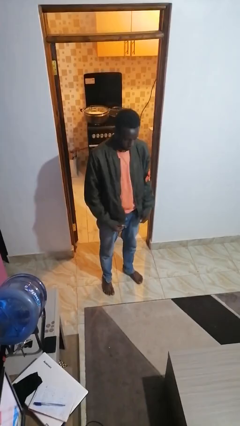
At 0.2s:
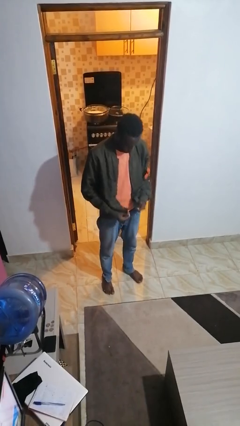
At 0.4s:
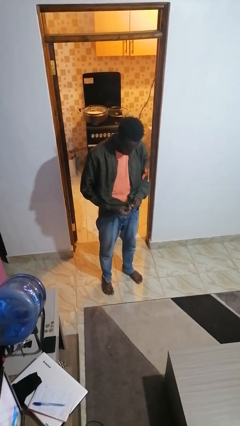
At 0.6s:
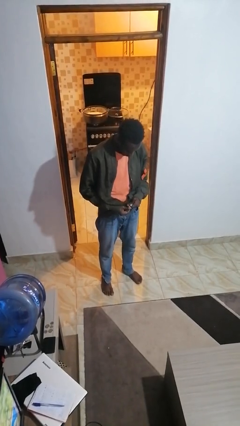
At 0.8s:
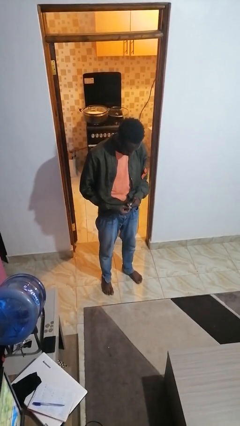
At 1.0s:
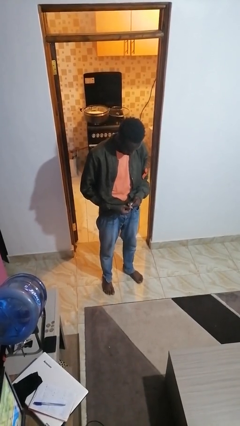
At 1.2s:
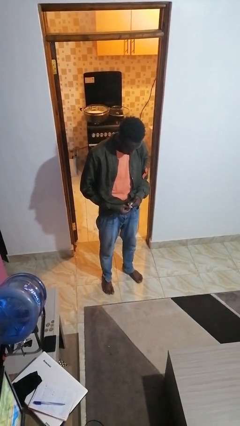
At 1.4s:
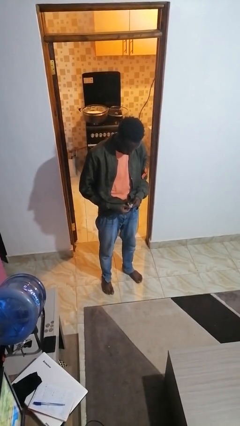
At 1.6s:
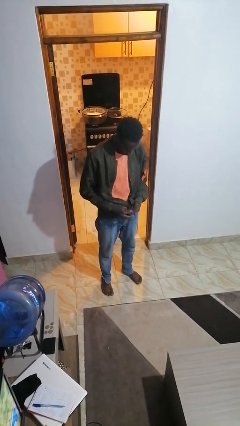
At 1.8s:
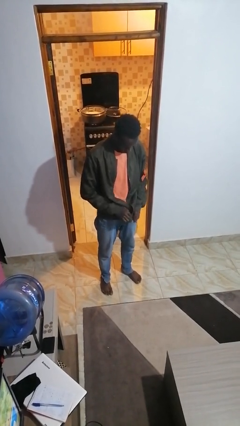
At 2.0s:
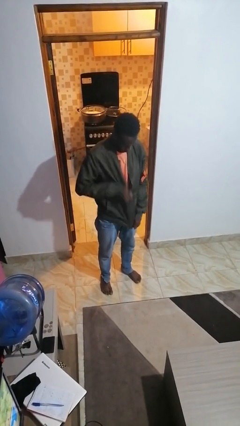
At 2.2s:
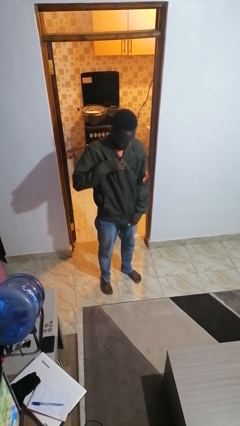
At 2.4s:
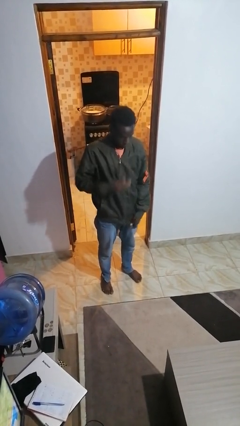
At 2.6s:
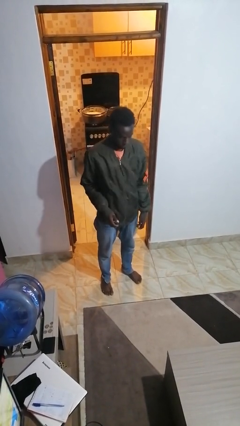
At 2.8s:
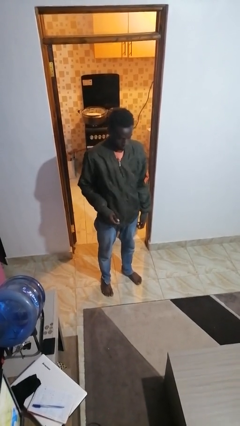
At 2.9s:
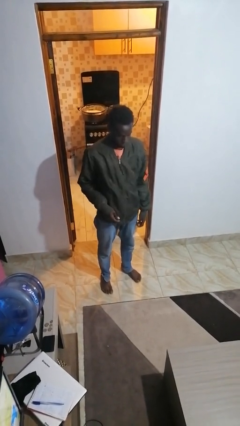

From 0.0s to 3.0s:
person zips up jacket

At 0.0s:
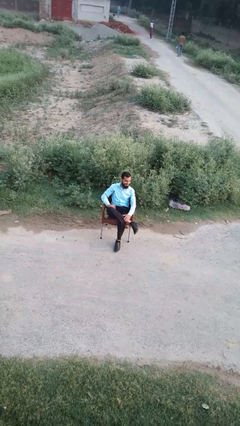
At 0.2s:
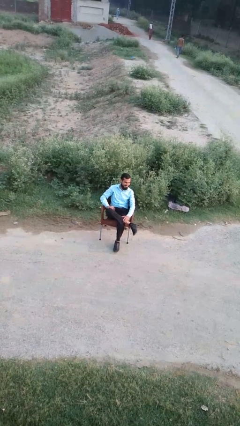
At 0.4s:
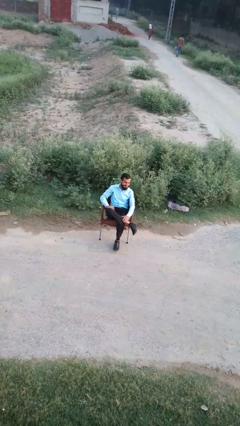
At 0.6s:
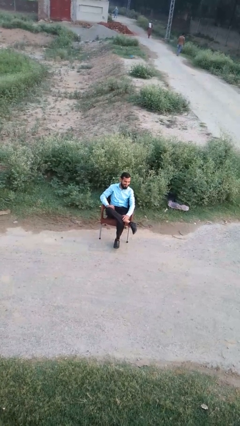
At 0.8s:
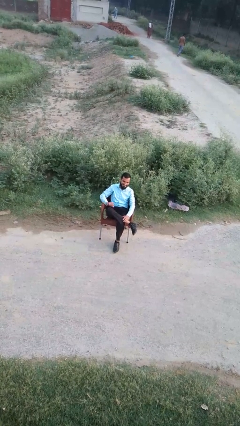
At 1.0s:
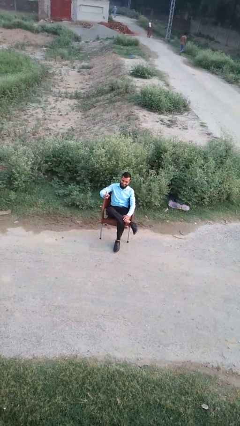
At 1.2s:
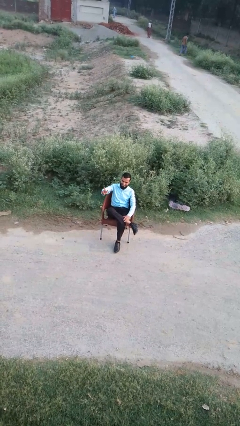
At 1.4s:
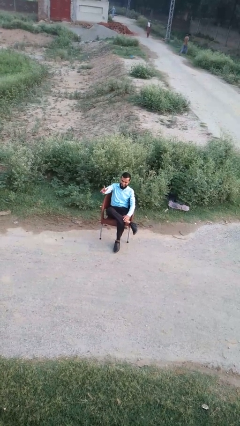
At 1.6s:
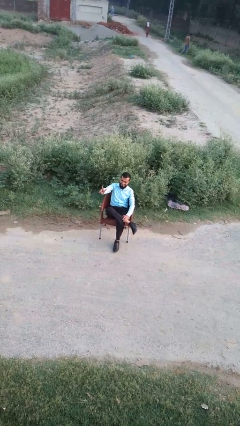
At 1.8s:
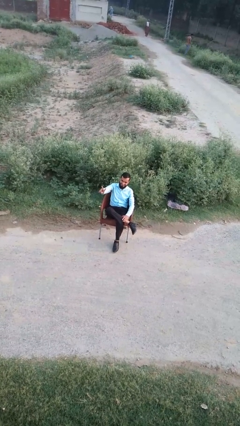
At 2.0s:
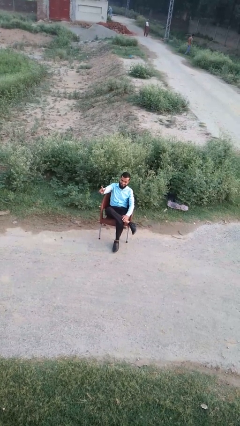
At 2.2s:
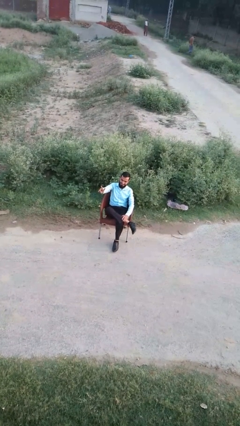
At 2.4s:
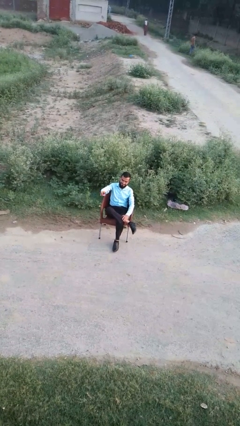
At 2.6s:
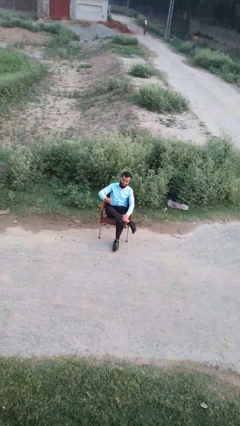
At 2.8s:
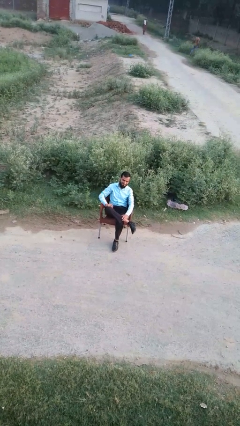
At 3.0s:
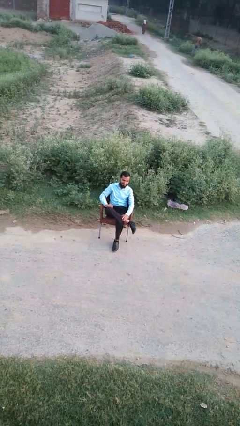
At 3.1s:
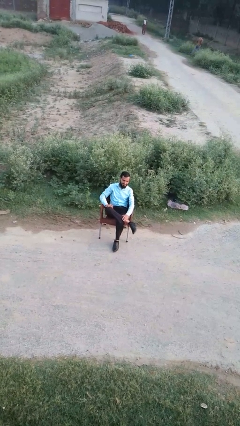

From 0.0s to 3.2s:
person gestures peace

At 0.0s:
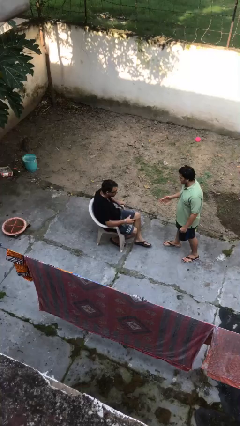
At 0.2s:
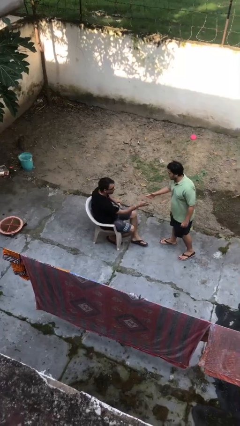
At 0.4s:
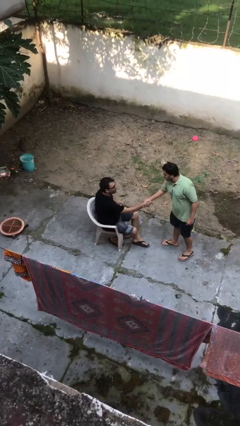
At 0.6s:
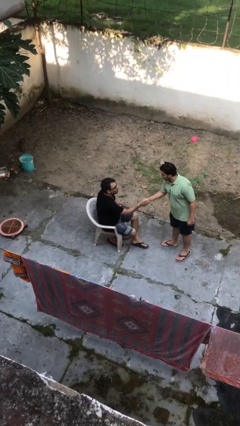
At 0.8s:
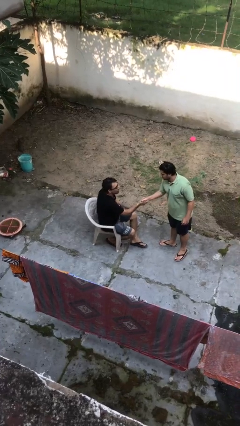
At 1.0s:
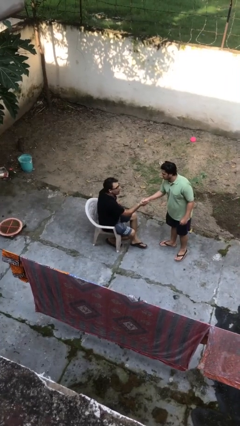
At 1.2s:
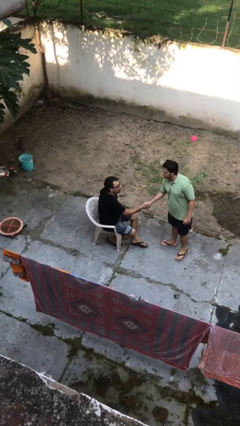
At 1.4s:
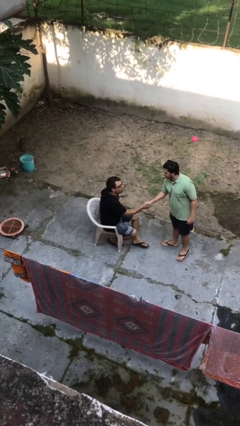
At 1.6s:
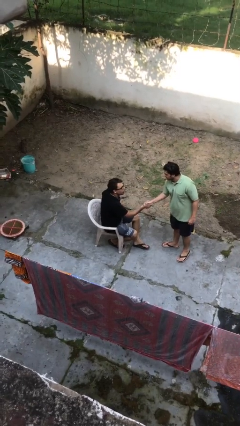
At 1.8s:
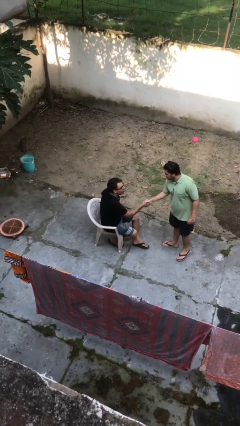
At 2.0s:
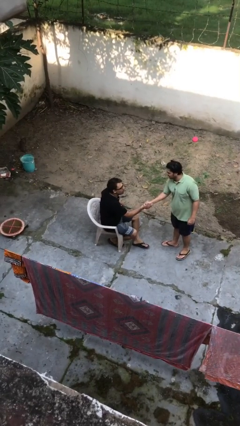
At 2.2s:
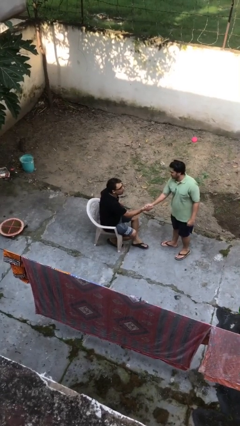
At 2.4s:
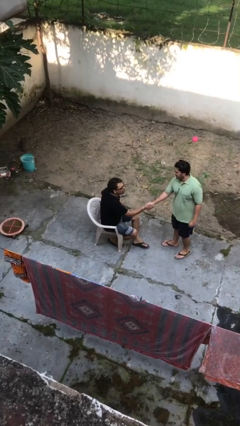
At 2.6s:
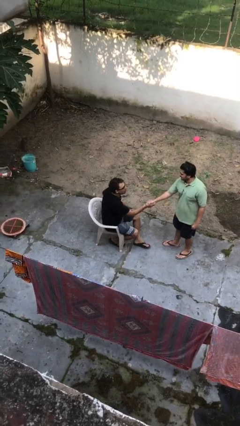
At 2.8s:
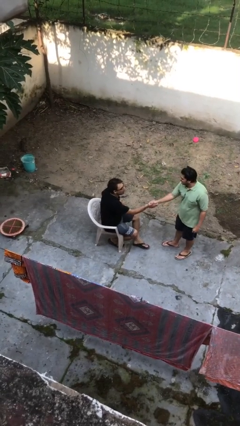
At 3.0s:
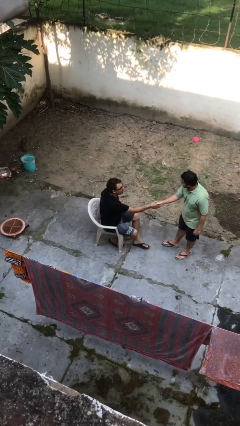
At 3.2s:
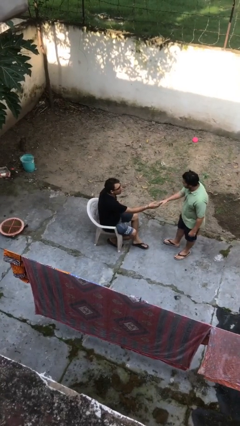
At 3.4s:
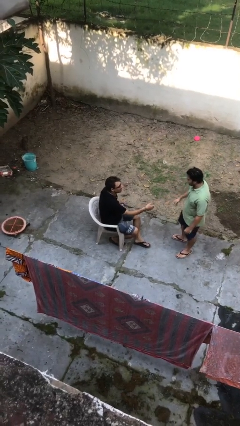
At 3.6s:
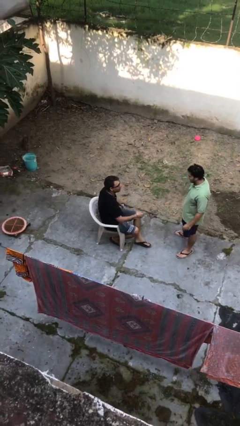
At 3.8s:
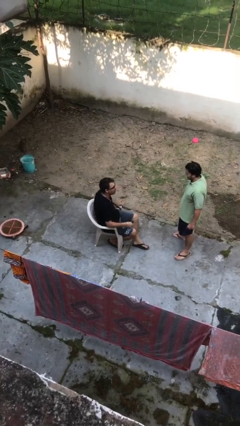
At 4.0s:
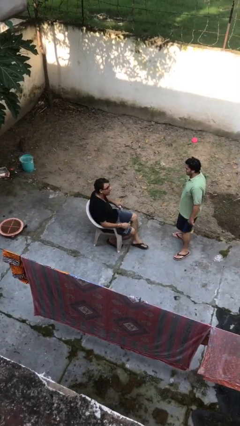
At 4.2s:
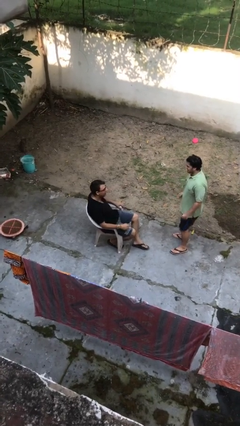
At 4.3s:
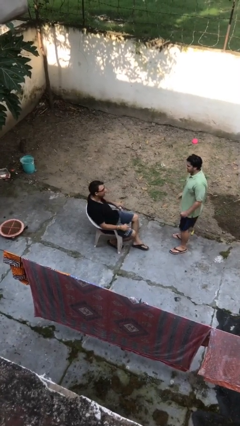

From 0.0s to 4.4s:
person shakes hand

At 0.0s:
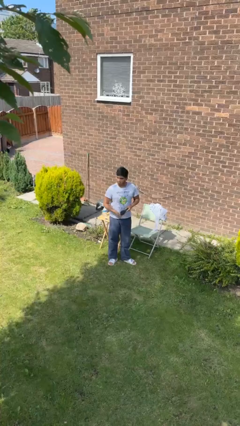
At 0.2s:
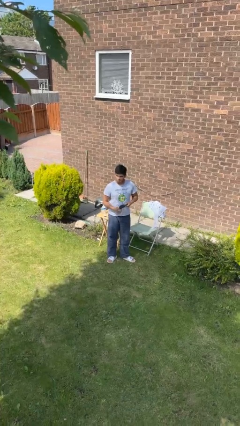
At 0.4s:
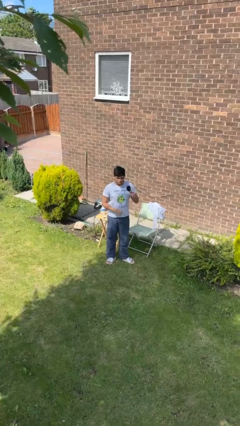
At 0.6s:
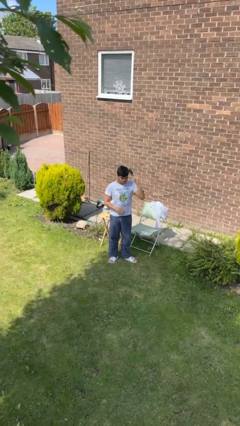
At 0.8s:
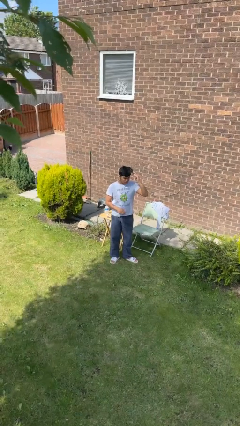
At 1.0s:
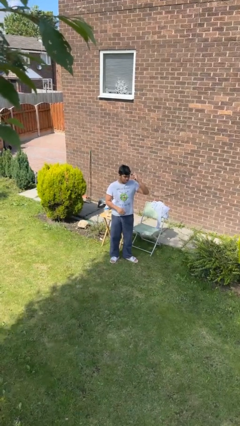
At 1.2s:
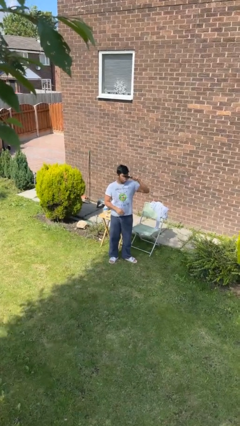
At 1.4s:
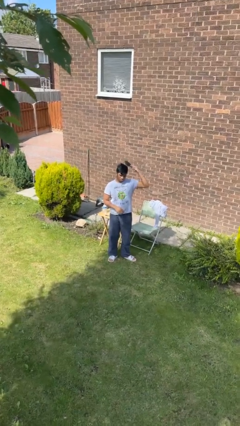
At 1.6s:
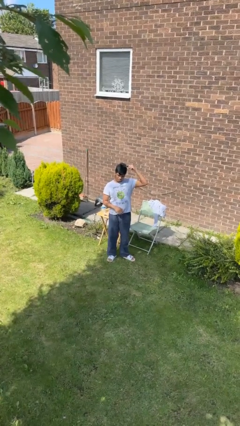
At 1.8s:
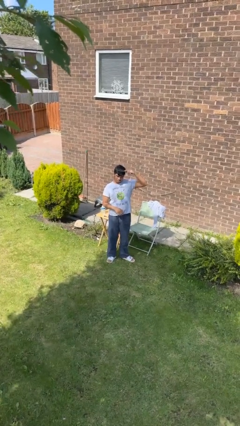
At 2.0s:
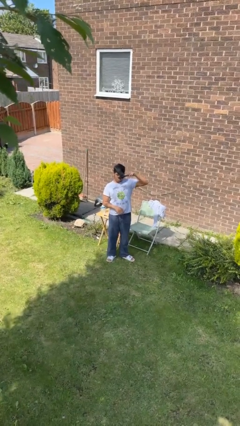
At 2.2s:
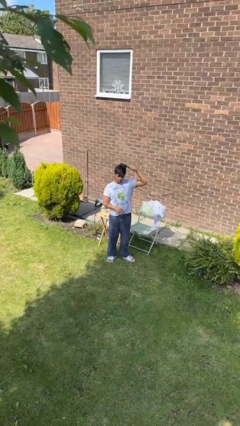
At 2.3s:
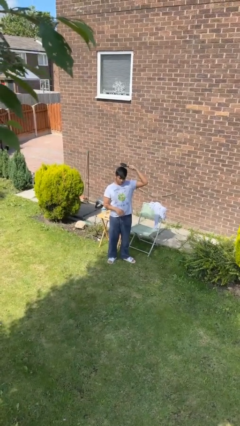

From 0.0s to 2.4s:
person brushes hair

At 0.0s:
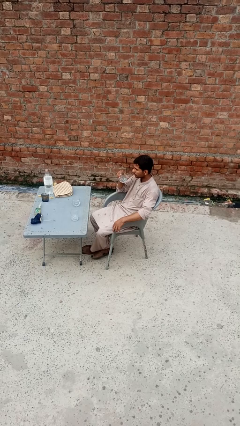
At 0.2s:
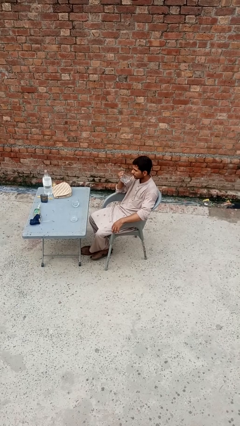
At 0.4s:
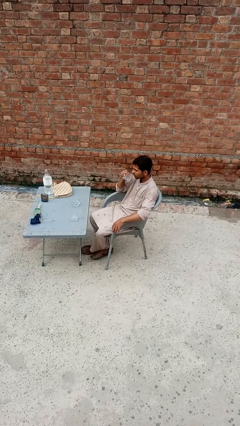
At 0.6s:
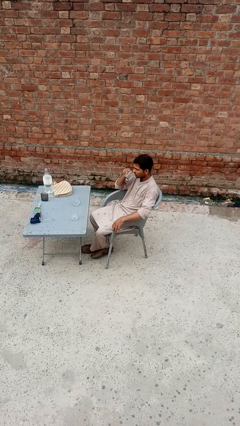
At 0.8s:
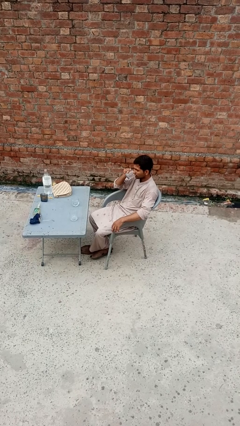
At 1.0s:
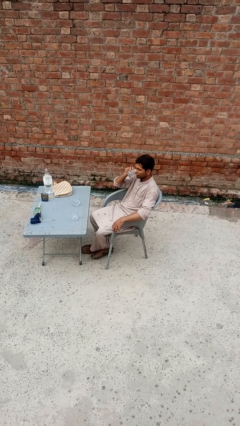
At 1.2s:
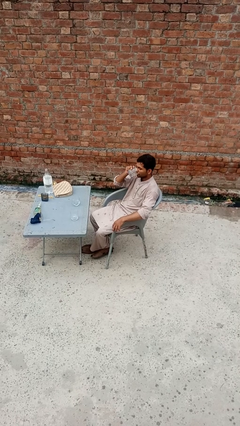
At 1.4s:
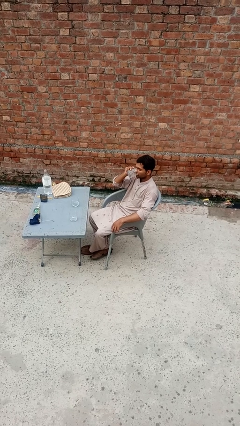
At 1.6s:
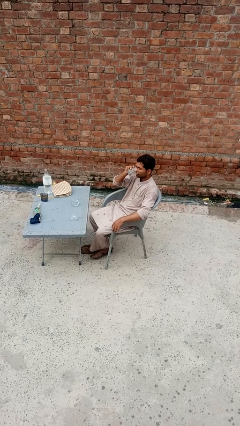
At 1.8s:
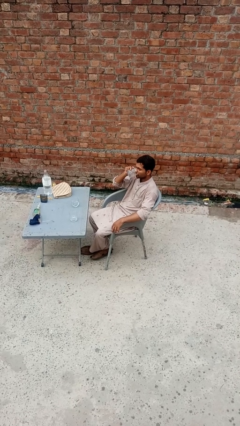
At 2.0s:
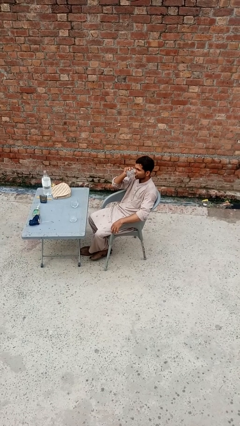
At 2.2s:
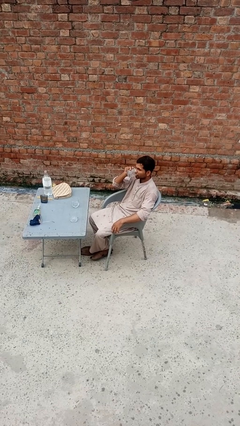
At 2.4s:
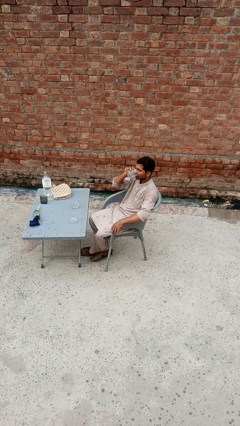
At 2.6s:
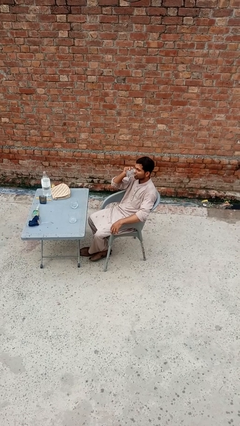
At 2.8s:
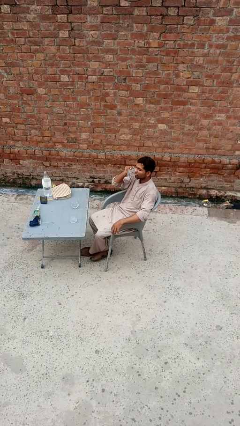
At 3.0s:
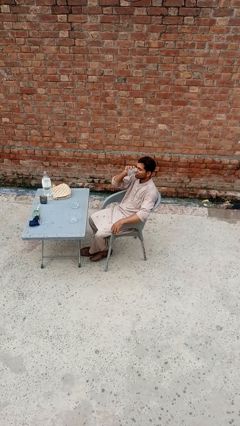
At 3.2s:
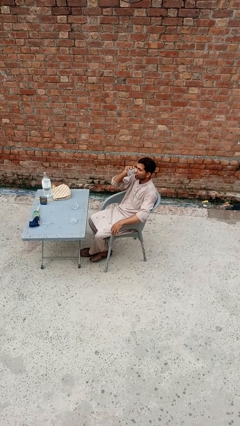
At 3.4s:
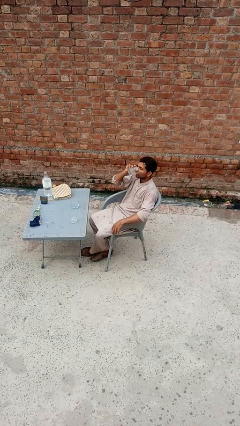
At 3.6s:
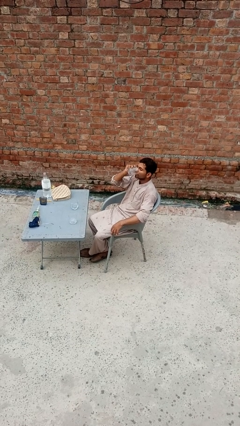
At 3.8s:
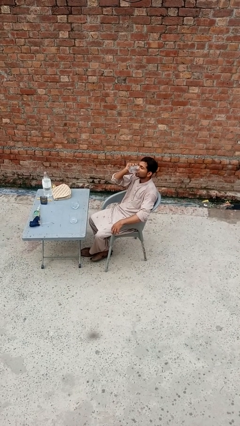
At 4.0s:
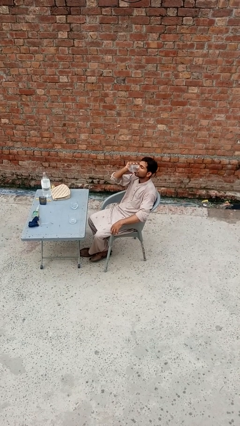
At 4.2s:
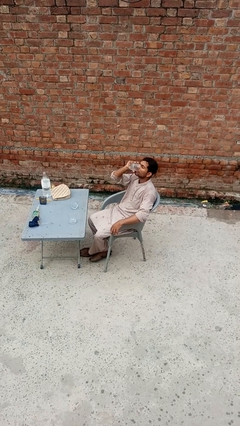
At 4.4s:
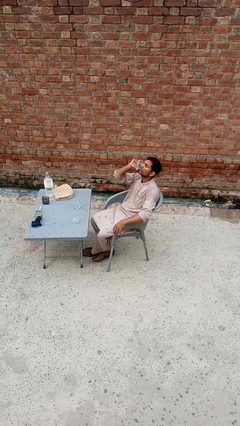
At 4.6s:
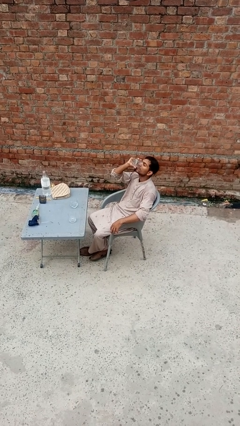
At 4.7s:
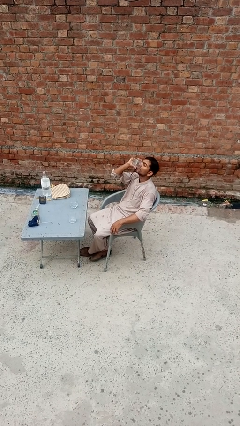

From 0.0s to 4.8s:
person drinks from shotglass
